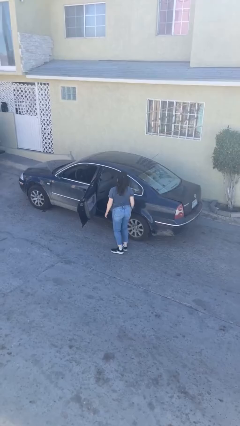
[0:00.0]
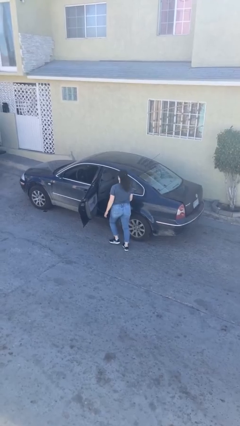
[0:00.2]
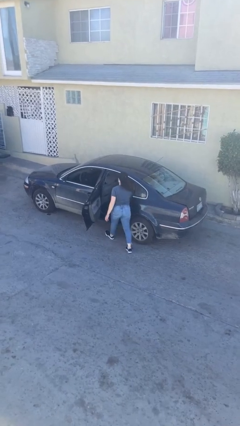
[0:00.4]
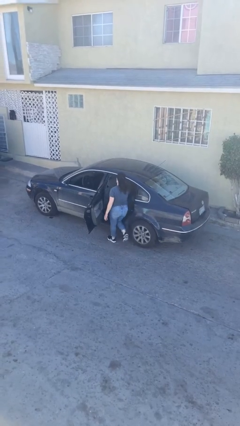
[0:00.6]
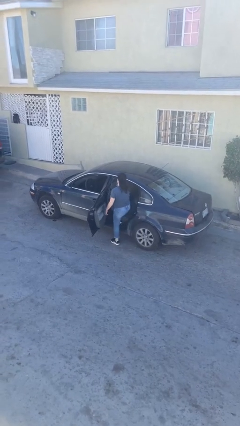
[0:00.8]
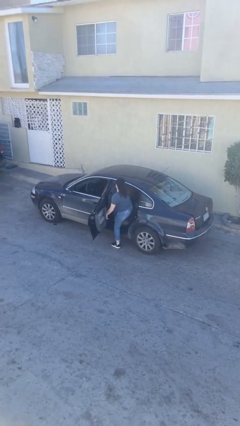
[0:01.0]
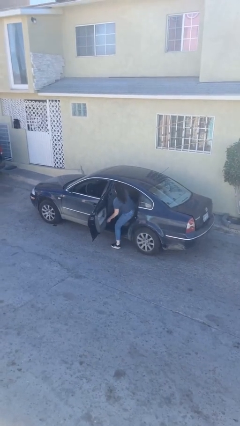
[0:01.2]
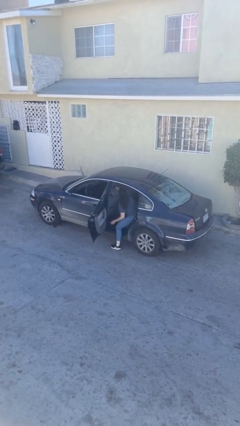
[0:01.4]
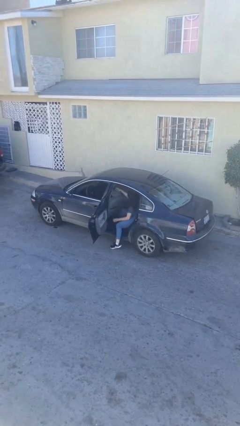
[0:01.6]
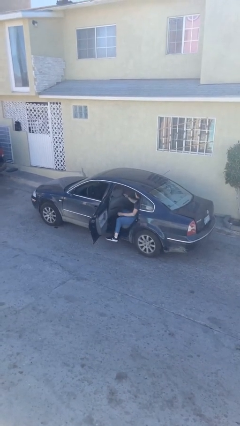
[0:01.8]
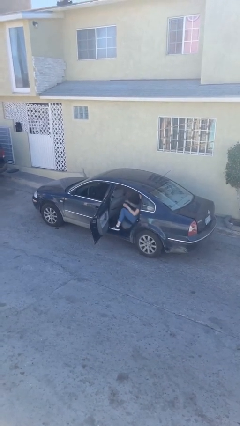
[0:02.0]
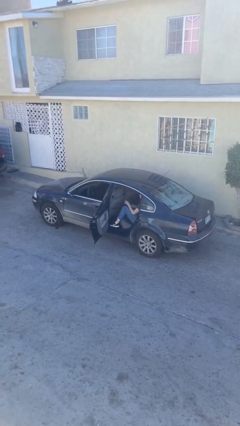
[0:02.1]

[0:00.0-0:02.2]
person enters car

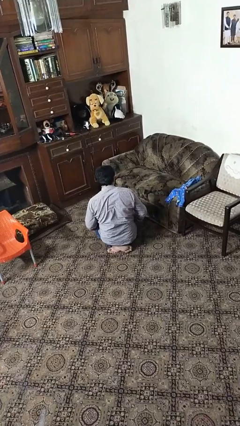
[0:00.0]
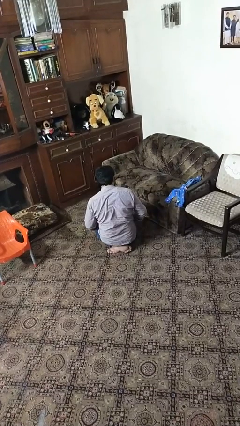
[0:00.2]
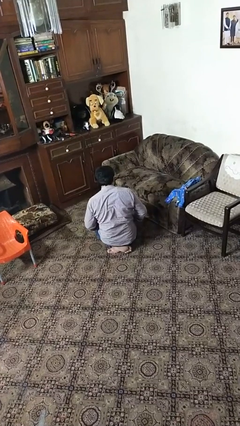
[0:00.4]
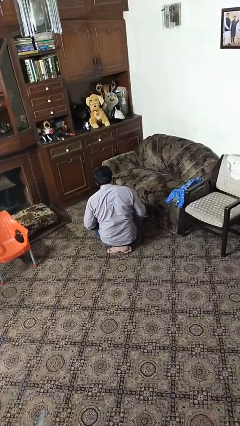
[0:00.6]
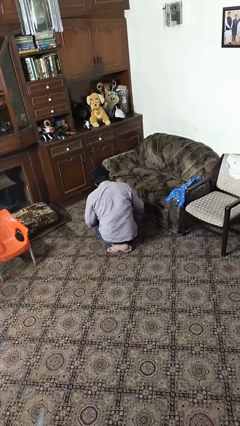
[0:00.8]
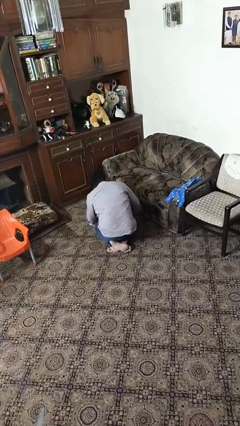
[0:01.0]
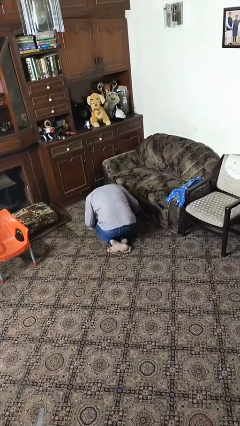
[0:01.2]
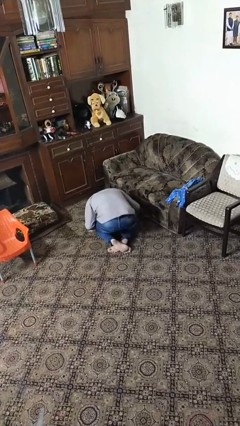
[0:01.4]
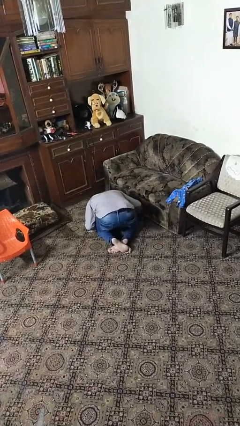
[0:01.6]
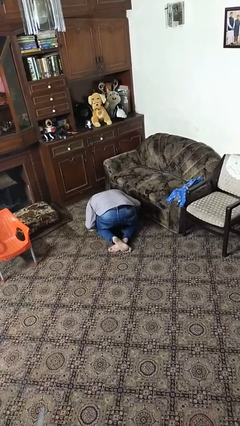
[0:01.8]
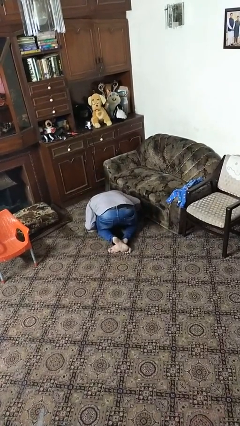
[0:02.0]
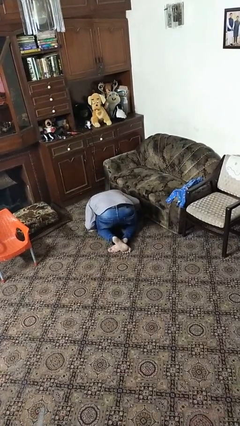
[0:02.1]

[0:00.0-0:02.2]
person searches under couch

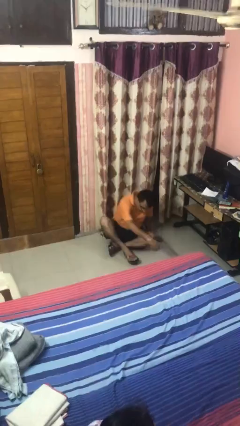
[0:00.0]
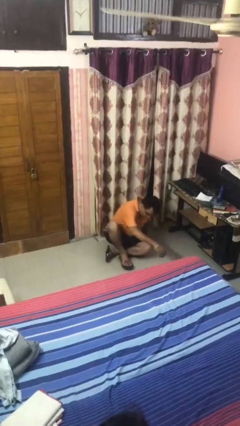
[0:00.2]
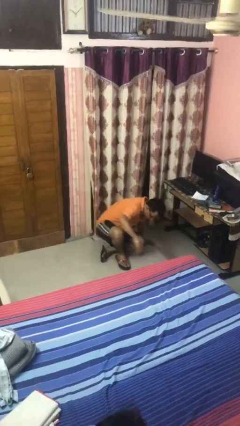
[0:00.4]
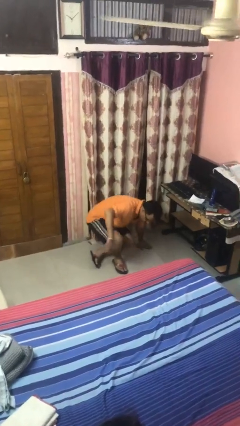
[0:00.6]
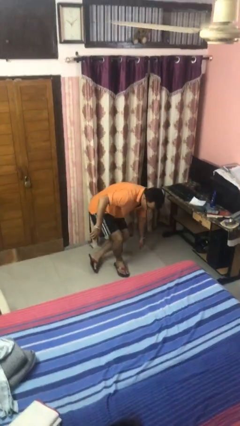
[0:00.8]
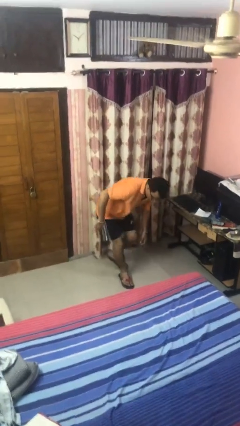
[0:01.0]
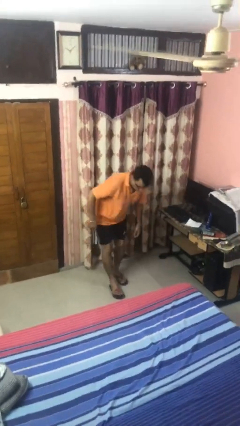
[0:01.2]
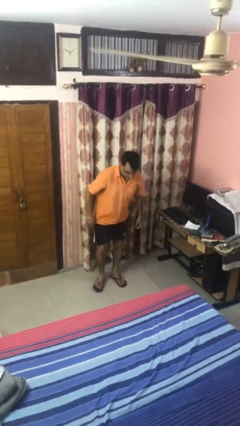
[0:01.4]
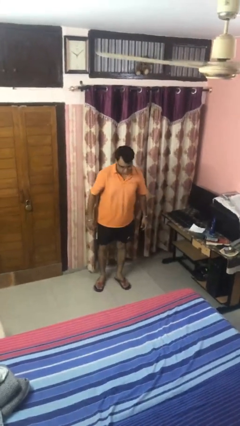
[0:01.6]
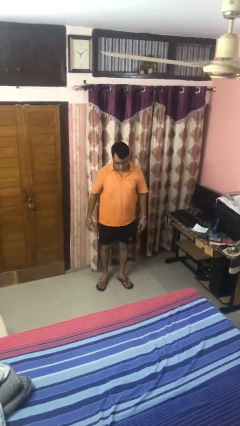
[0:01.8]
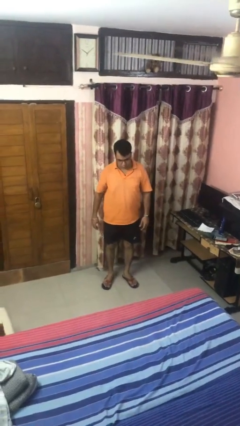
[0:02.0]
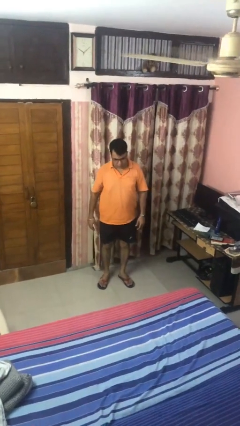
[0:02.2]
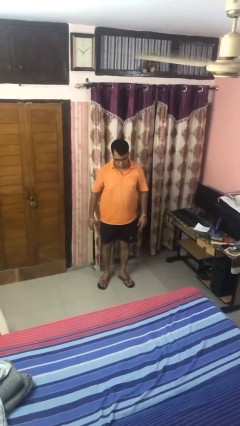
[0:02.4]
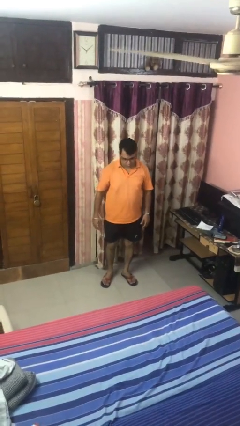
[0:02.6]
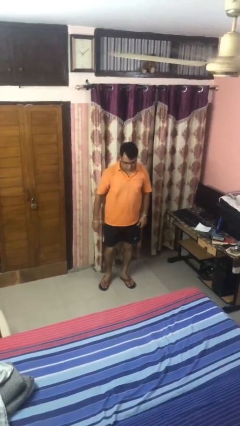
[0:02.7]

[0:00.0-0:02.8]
person stands up from floor

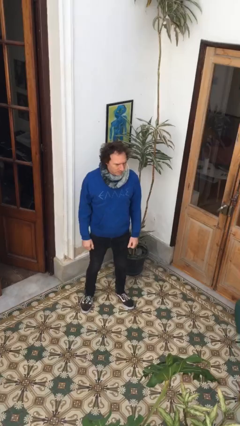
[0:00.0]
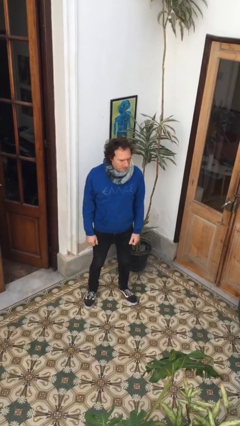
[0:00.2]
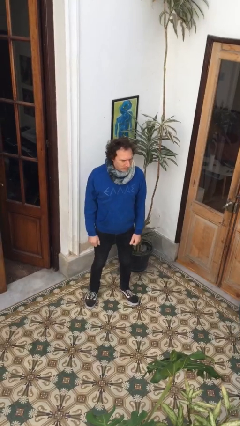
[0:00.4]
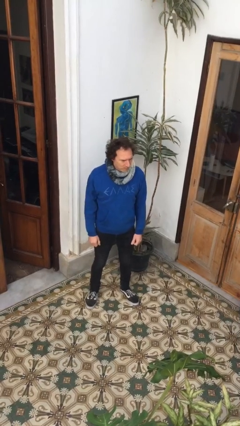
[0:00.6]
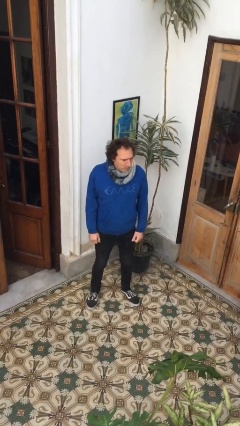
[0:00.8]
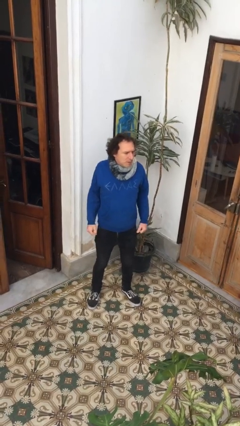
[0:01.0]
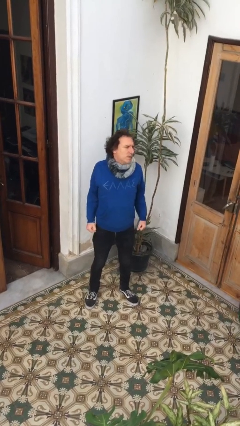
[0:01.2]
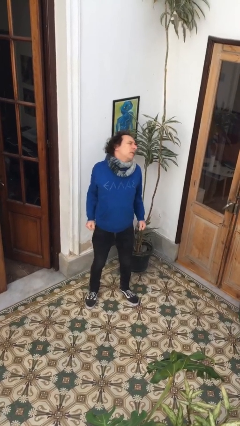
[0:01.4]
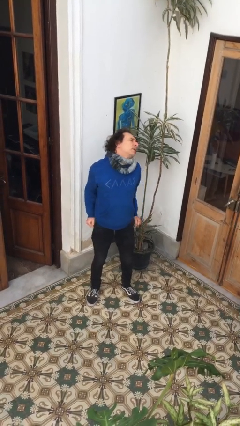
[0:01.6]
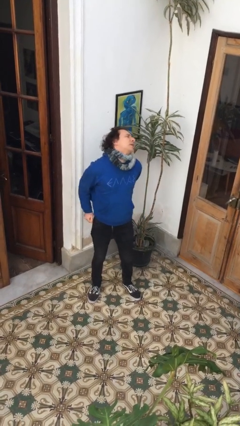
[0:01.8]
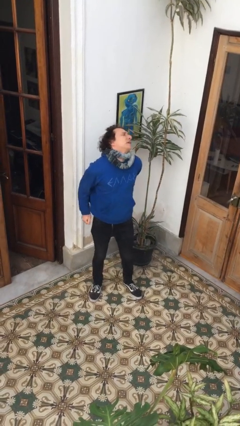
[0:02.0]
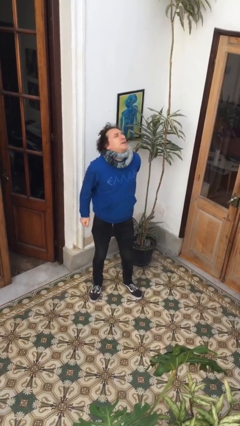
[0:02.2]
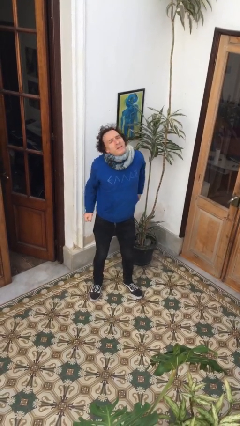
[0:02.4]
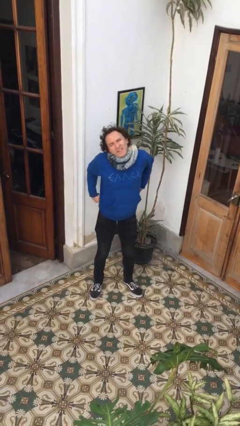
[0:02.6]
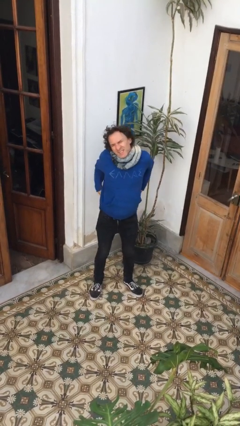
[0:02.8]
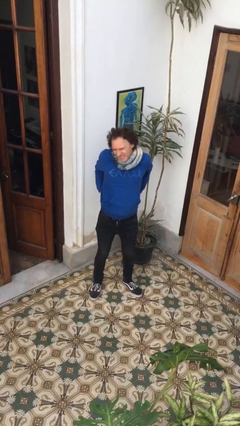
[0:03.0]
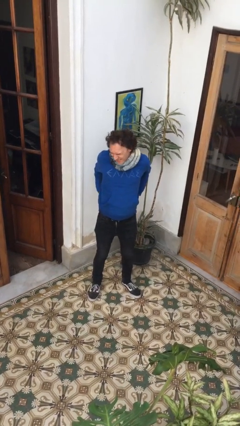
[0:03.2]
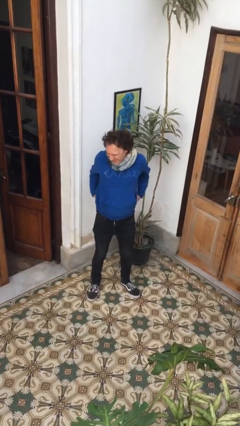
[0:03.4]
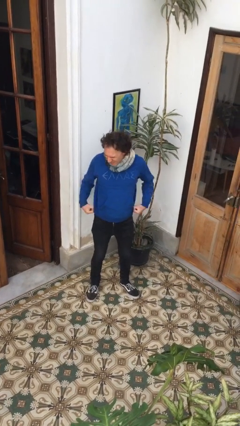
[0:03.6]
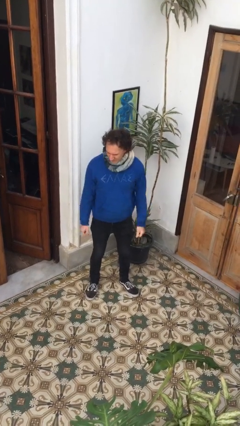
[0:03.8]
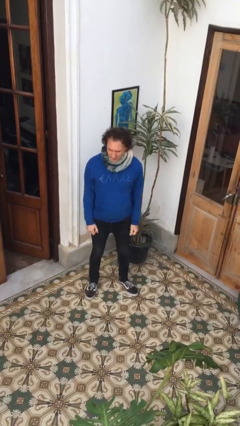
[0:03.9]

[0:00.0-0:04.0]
person stretches back

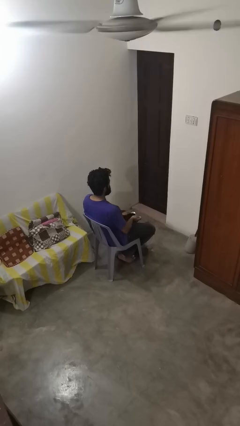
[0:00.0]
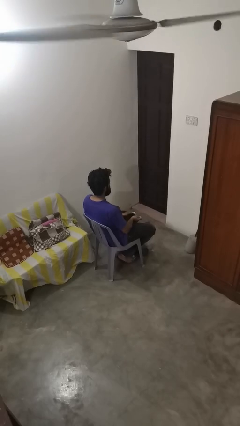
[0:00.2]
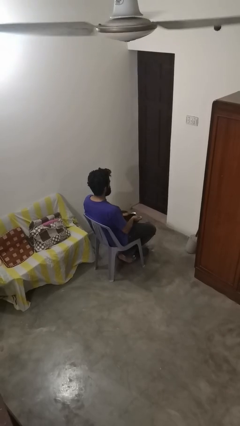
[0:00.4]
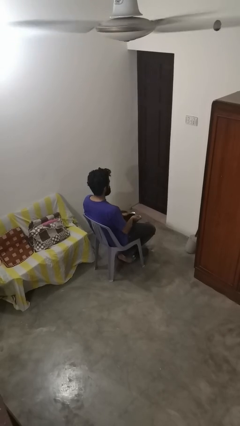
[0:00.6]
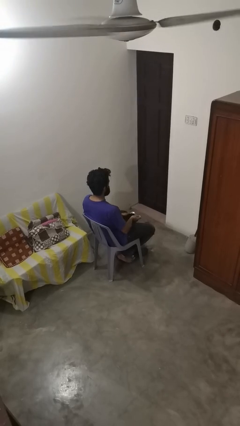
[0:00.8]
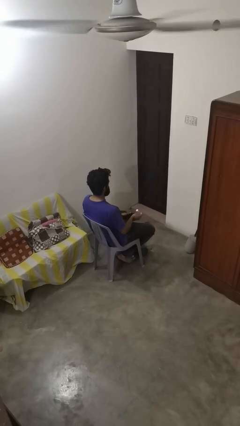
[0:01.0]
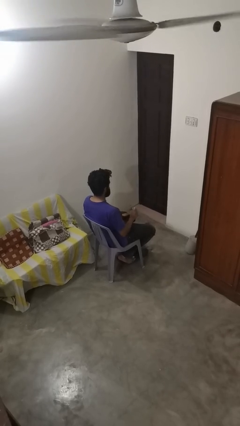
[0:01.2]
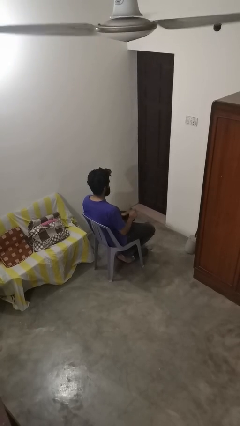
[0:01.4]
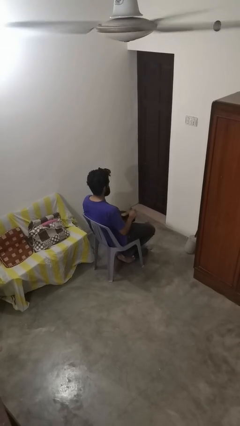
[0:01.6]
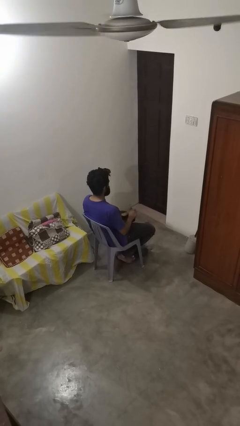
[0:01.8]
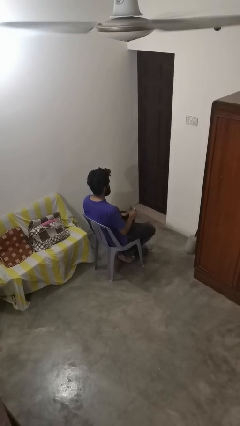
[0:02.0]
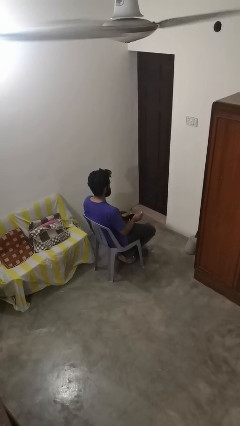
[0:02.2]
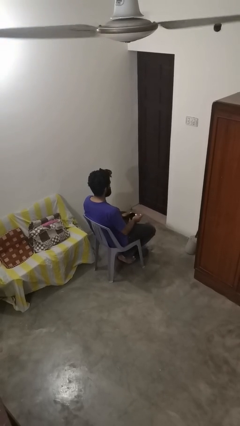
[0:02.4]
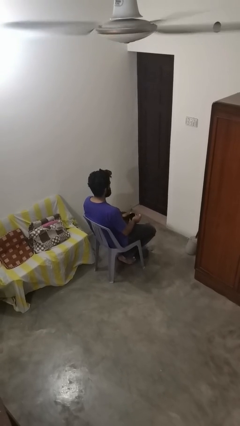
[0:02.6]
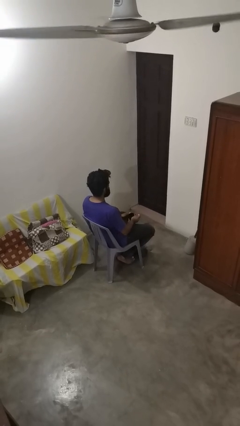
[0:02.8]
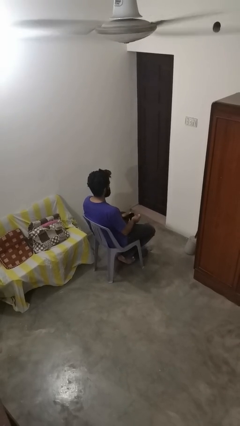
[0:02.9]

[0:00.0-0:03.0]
person stirs mug

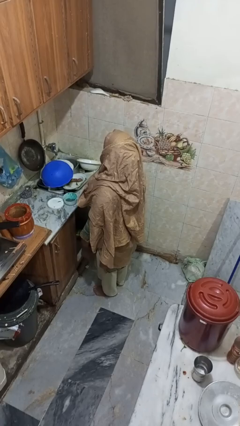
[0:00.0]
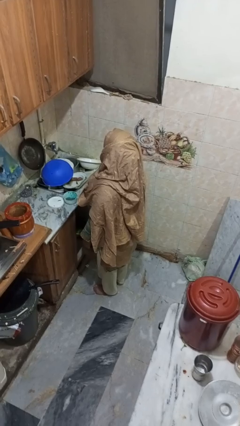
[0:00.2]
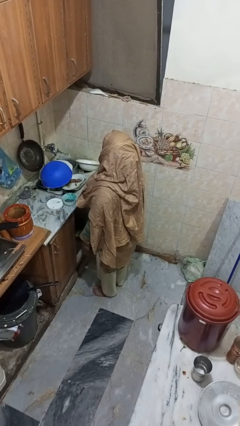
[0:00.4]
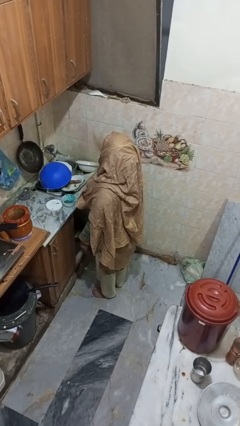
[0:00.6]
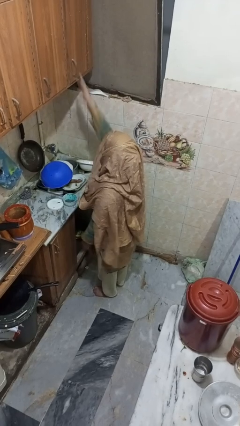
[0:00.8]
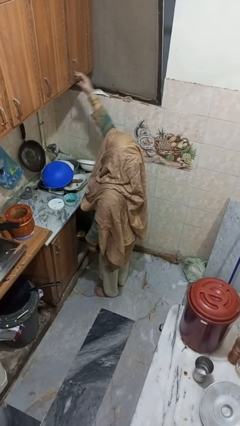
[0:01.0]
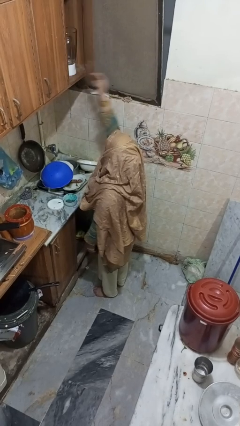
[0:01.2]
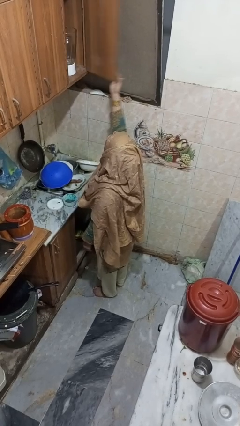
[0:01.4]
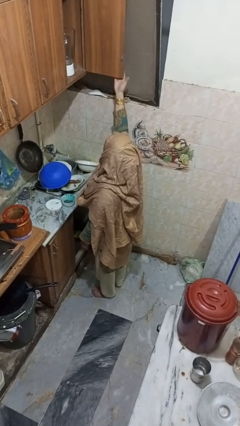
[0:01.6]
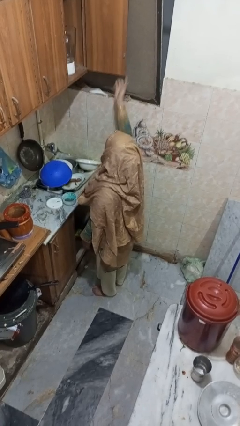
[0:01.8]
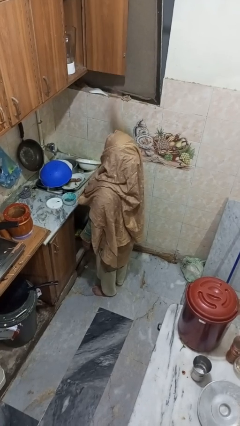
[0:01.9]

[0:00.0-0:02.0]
person opens cabinet

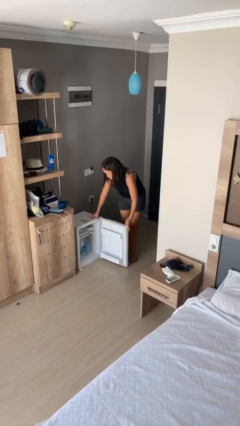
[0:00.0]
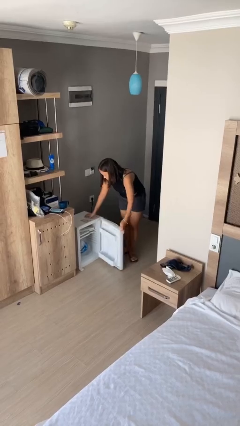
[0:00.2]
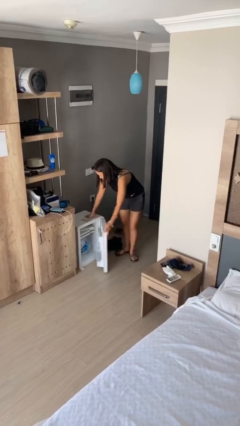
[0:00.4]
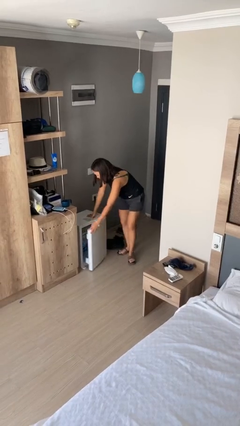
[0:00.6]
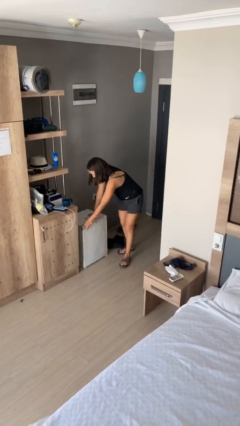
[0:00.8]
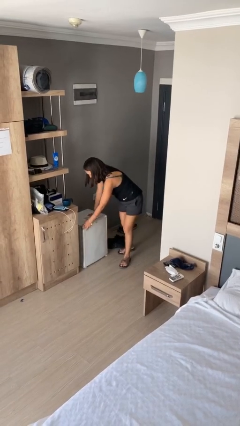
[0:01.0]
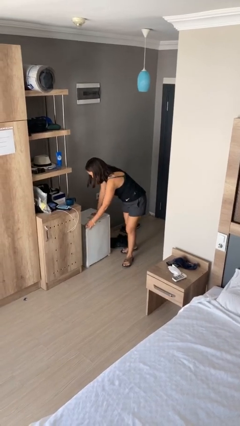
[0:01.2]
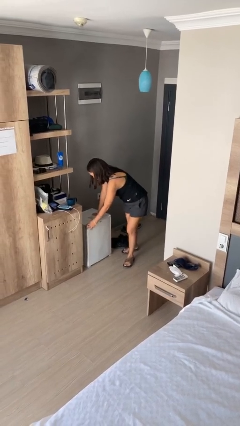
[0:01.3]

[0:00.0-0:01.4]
person closes refrigerator
